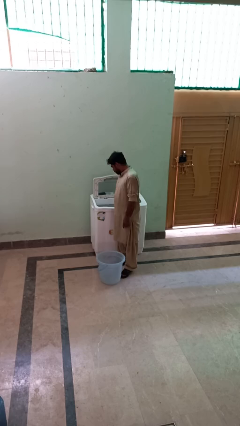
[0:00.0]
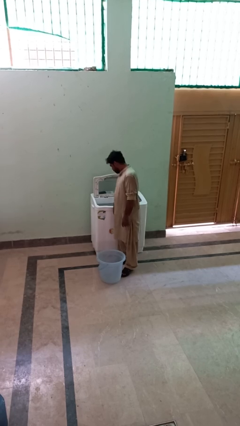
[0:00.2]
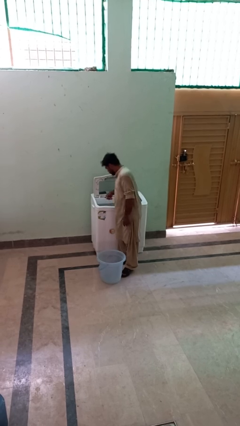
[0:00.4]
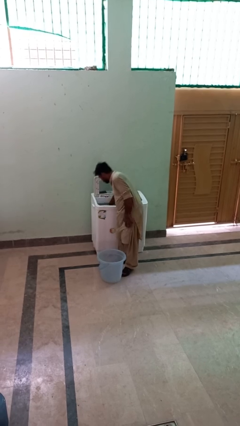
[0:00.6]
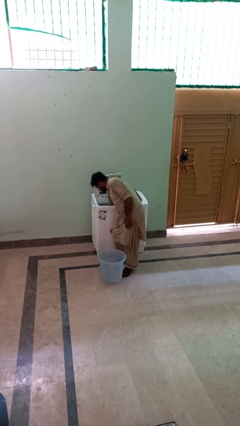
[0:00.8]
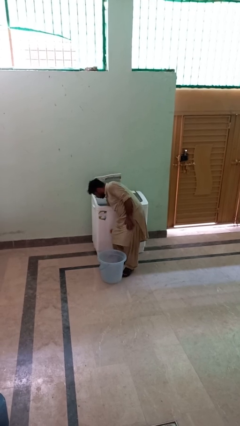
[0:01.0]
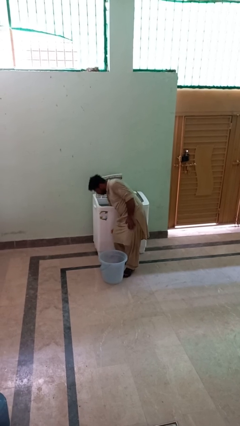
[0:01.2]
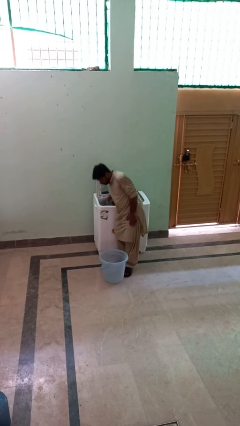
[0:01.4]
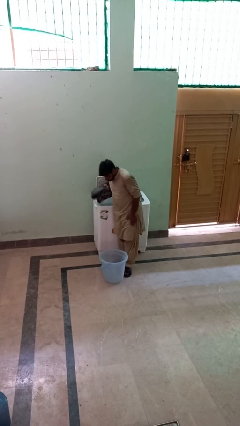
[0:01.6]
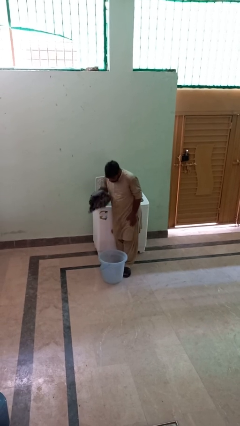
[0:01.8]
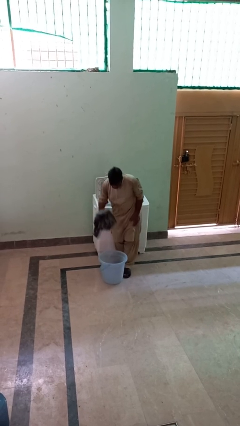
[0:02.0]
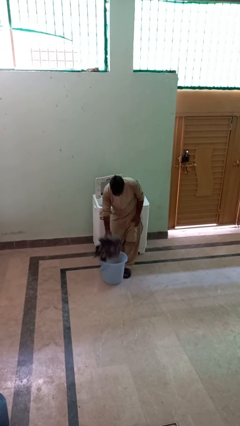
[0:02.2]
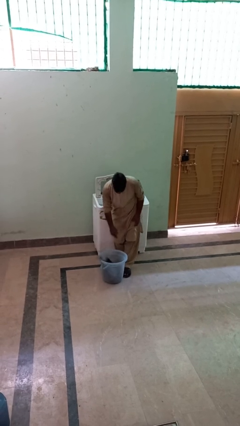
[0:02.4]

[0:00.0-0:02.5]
person unloads clotheswasher

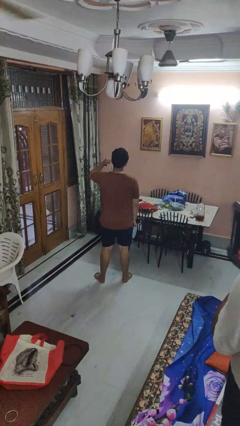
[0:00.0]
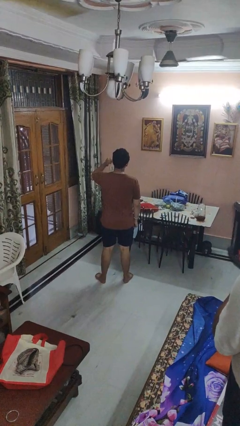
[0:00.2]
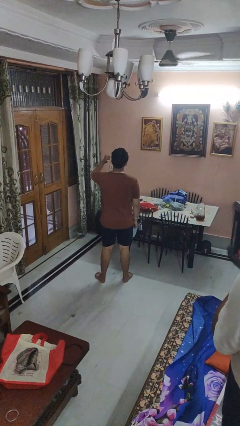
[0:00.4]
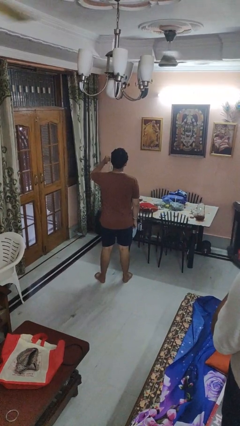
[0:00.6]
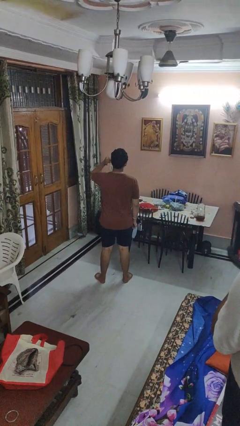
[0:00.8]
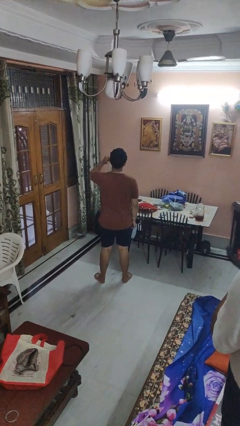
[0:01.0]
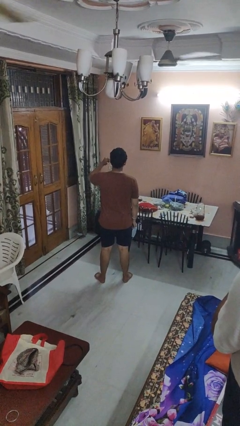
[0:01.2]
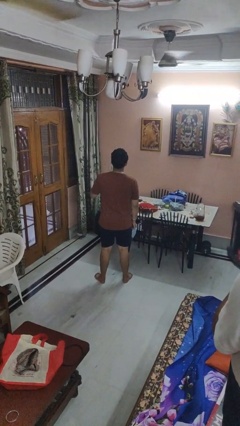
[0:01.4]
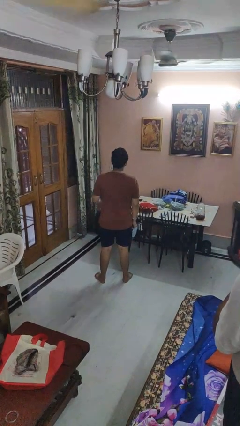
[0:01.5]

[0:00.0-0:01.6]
person gestures behind me

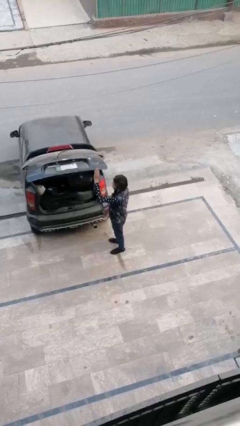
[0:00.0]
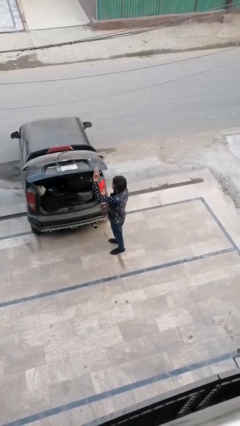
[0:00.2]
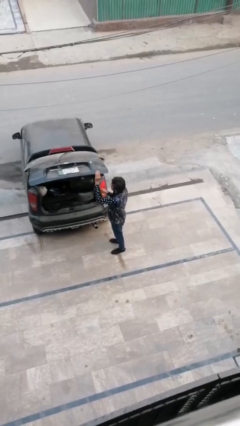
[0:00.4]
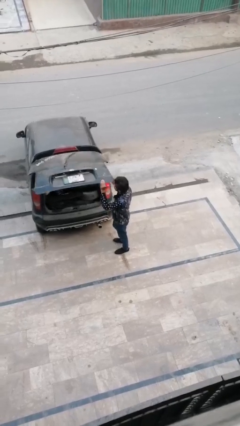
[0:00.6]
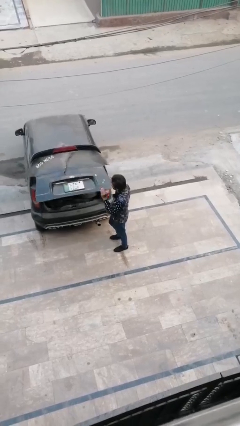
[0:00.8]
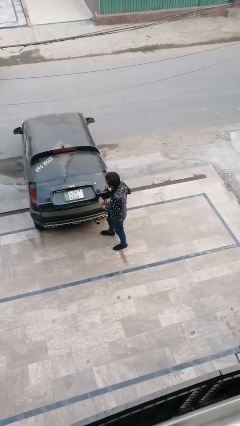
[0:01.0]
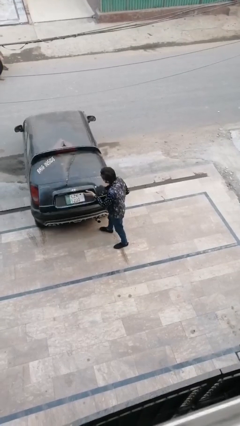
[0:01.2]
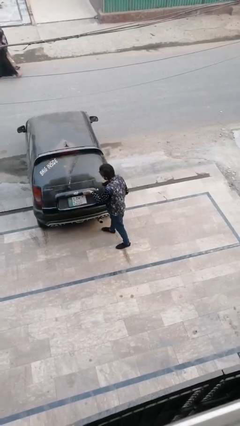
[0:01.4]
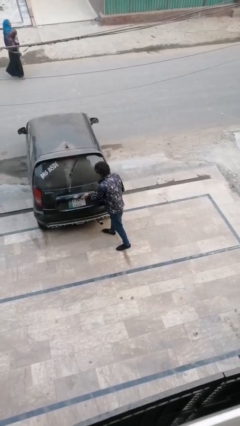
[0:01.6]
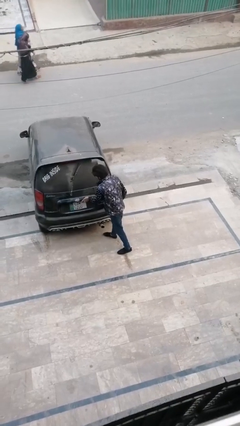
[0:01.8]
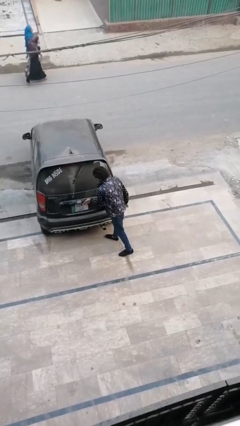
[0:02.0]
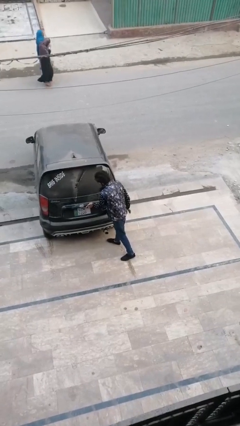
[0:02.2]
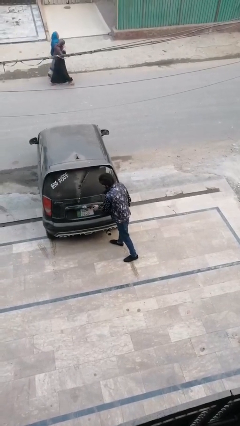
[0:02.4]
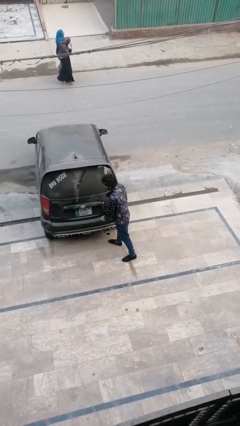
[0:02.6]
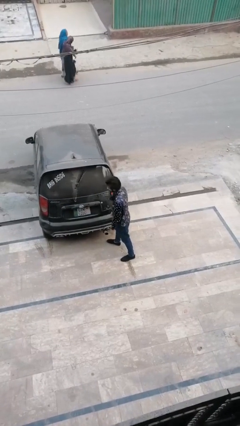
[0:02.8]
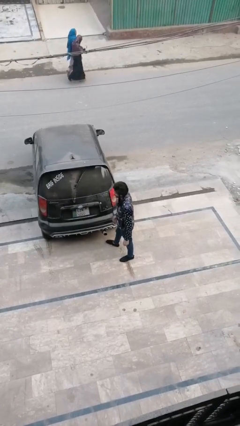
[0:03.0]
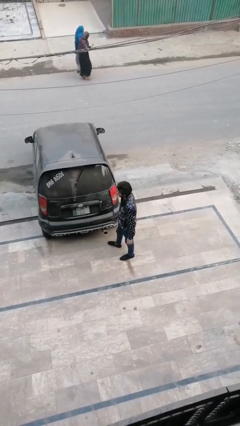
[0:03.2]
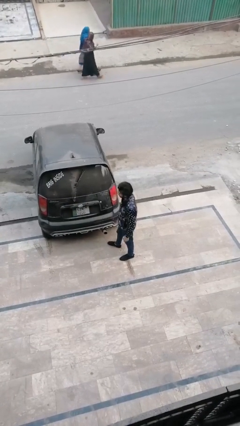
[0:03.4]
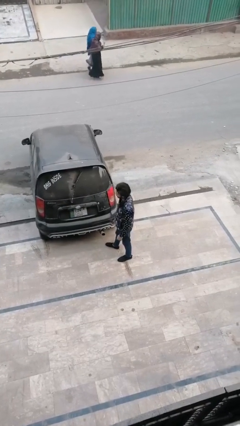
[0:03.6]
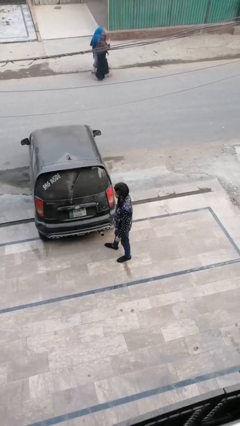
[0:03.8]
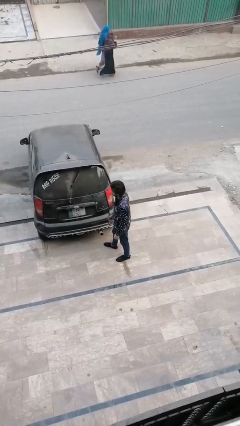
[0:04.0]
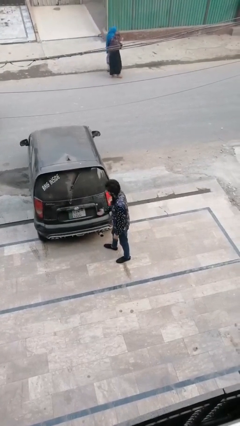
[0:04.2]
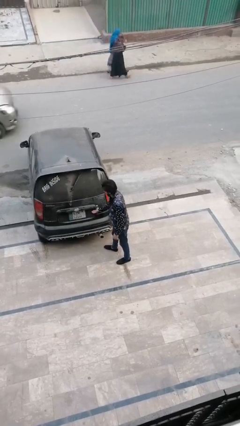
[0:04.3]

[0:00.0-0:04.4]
person closes car trunk

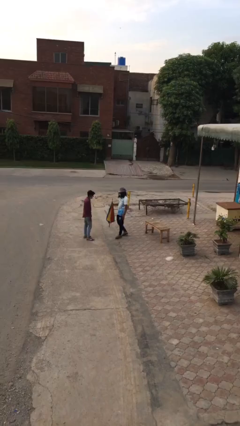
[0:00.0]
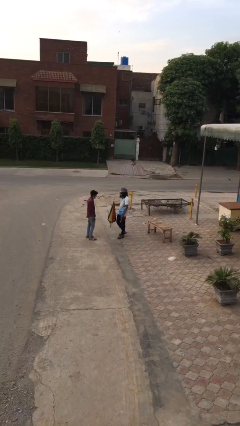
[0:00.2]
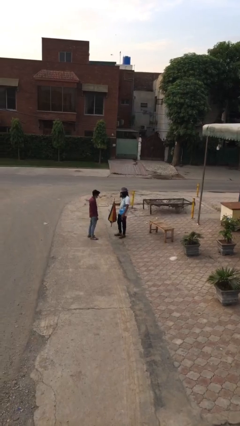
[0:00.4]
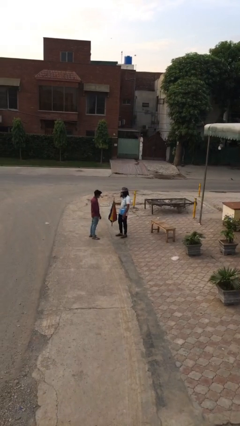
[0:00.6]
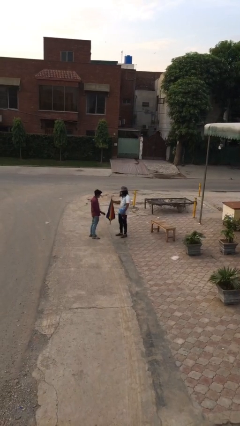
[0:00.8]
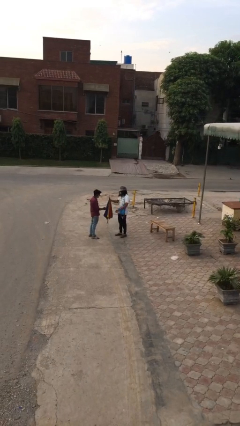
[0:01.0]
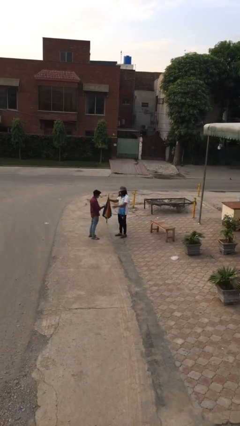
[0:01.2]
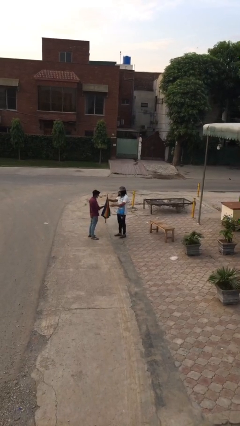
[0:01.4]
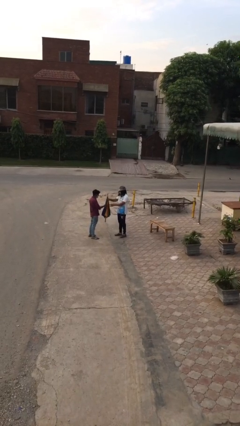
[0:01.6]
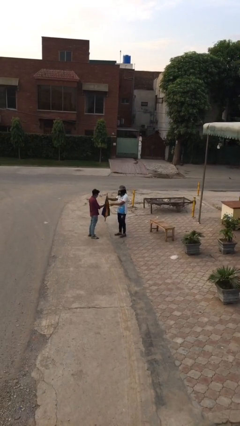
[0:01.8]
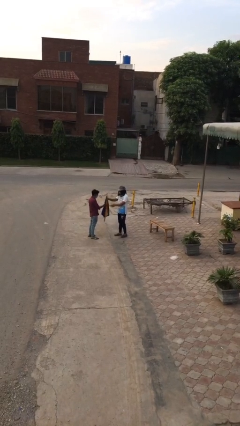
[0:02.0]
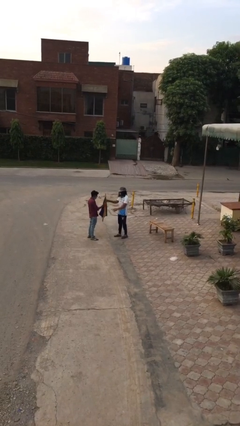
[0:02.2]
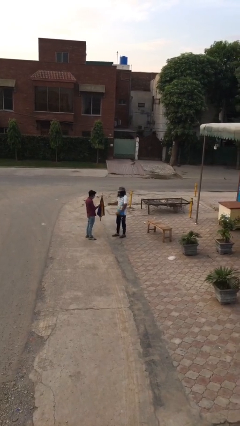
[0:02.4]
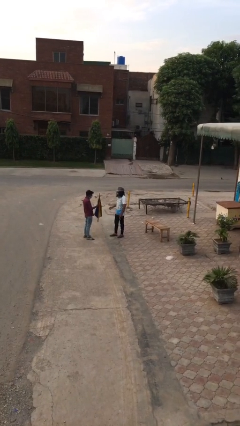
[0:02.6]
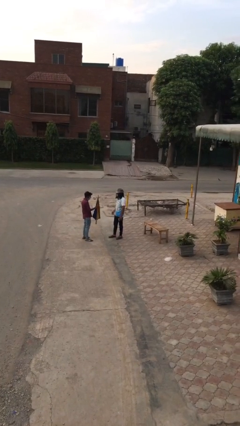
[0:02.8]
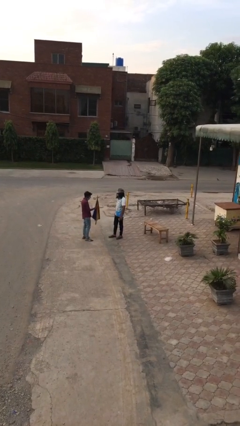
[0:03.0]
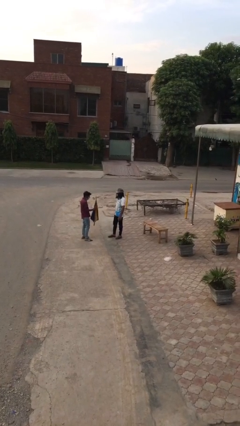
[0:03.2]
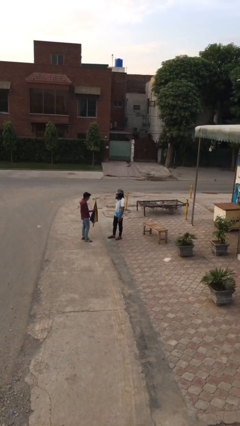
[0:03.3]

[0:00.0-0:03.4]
person transfers object to person

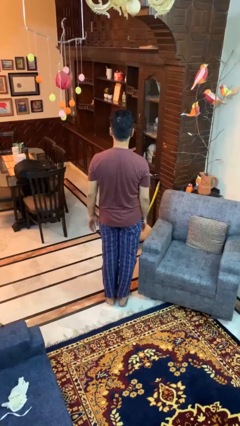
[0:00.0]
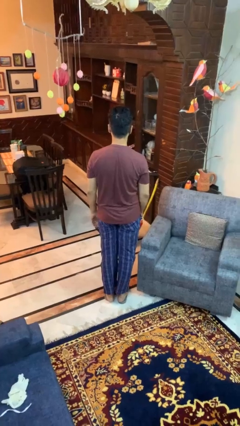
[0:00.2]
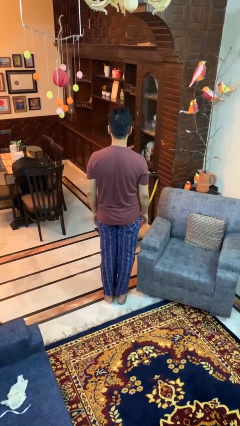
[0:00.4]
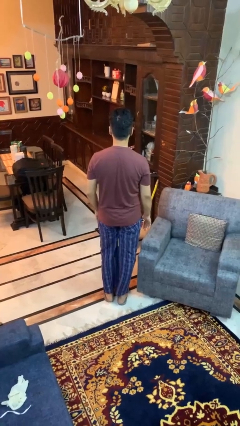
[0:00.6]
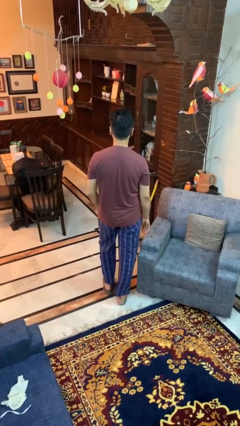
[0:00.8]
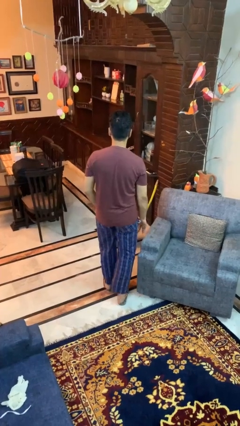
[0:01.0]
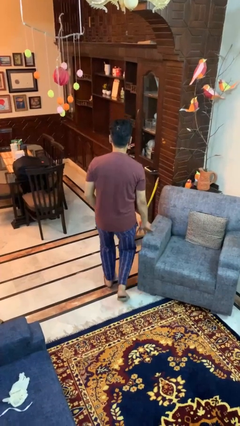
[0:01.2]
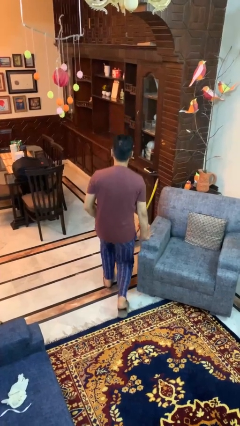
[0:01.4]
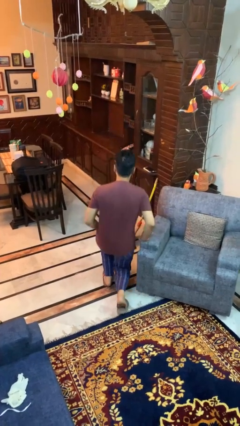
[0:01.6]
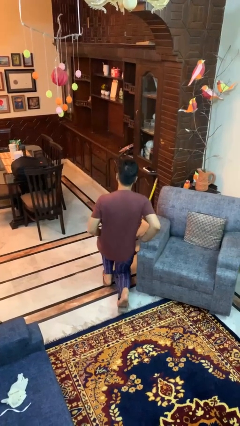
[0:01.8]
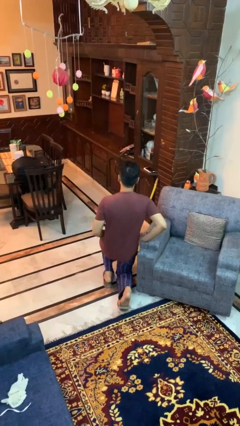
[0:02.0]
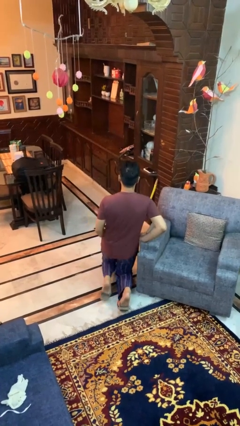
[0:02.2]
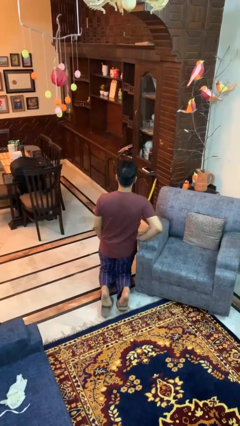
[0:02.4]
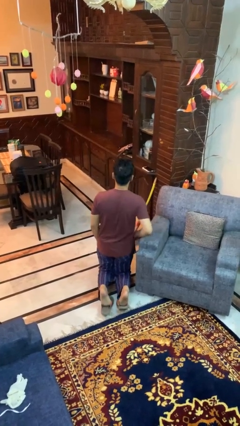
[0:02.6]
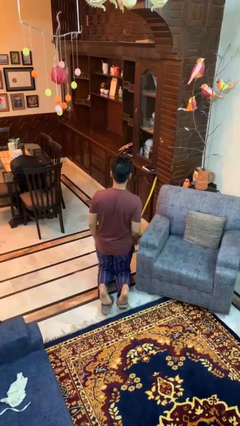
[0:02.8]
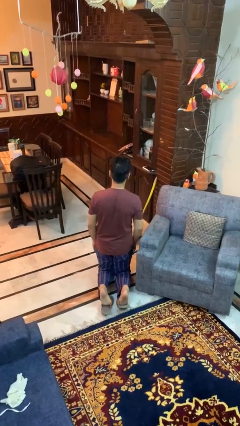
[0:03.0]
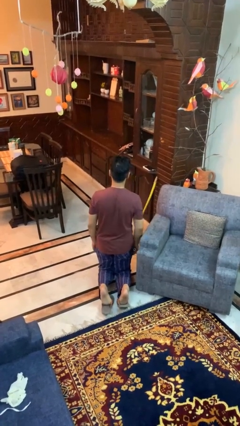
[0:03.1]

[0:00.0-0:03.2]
person kneels

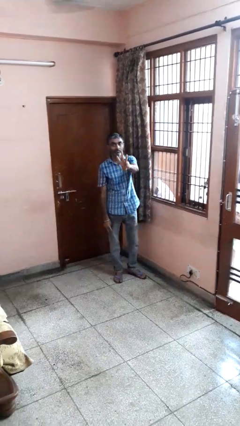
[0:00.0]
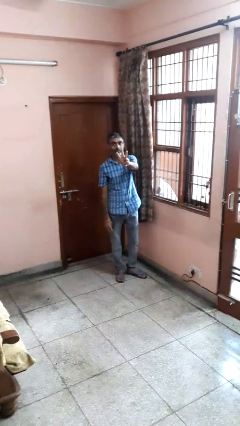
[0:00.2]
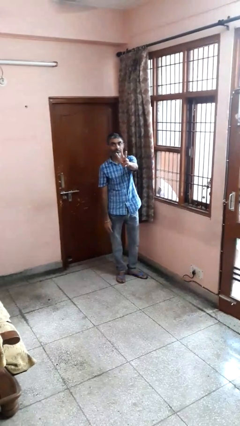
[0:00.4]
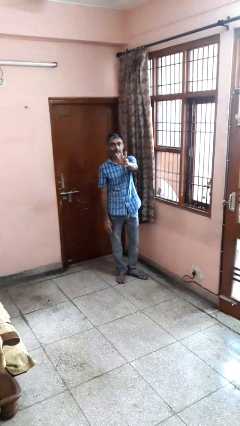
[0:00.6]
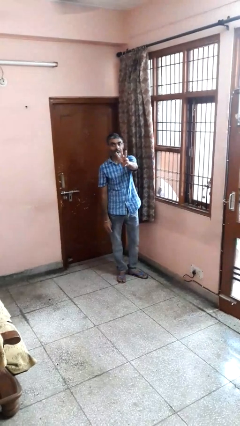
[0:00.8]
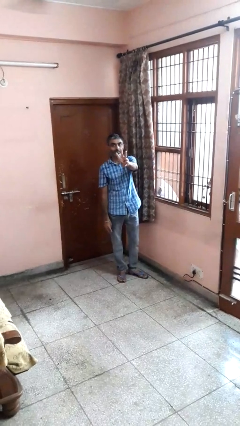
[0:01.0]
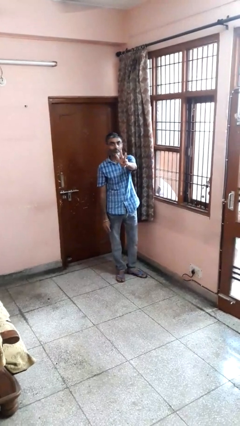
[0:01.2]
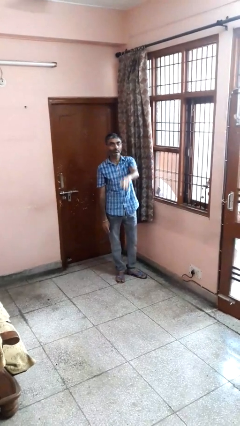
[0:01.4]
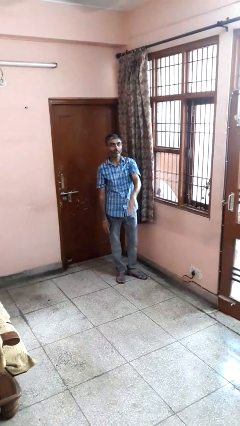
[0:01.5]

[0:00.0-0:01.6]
person gestures number three

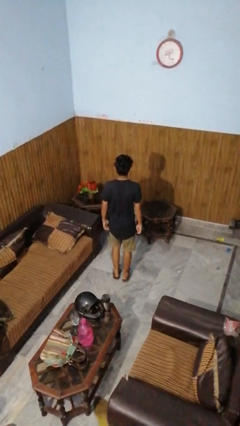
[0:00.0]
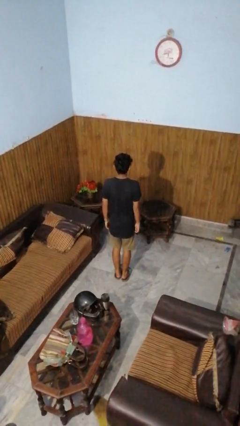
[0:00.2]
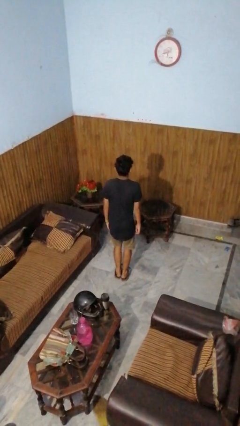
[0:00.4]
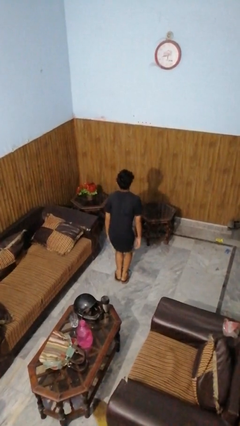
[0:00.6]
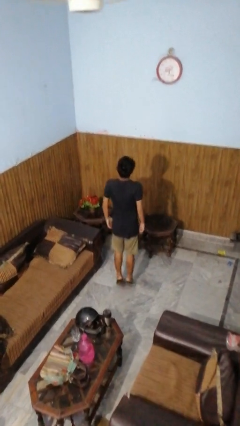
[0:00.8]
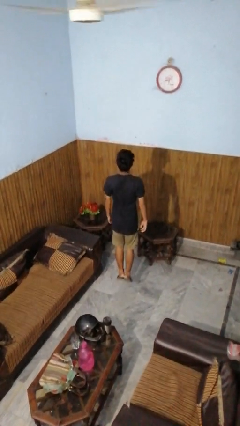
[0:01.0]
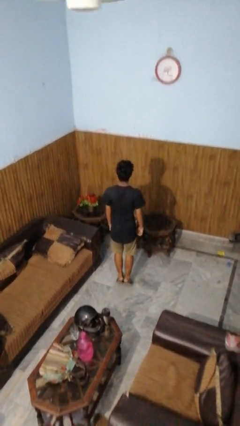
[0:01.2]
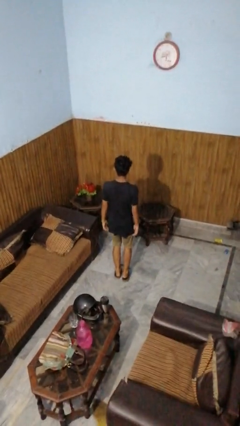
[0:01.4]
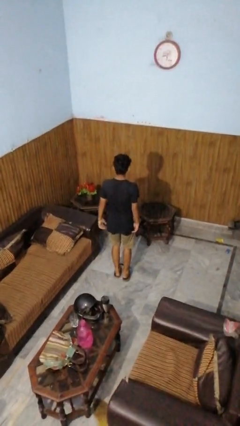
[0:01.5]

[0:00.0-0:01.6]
person jumps
